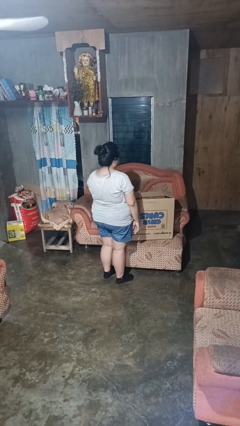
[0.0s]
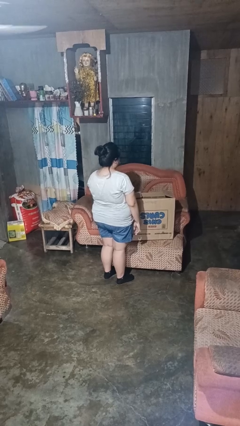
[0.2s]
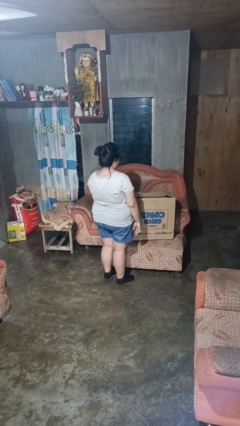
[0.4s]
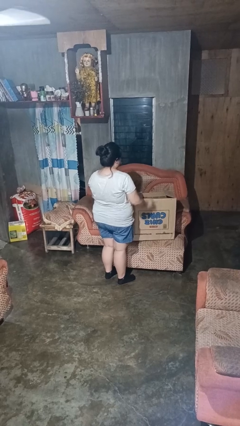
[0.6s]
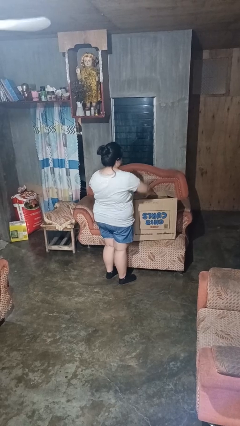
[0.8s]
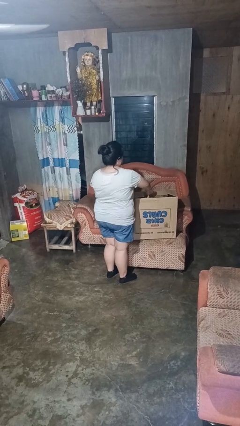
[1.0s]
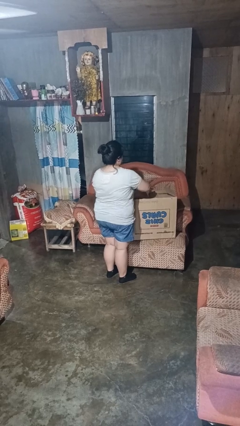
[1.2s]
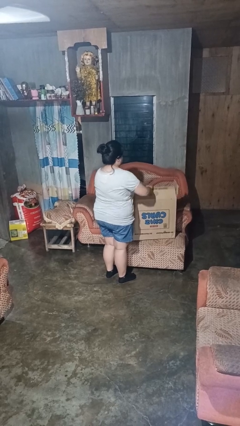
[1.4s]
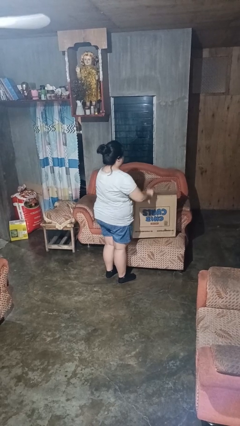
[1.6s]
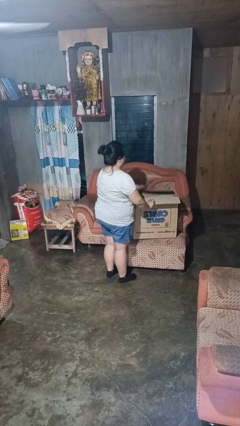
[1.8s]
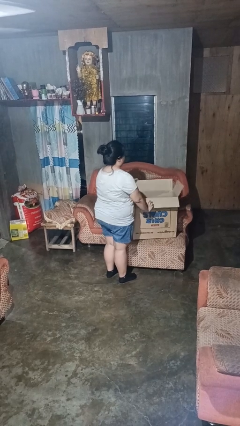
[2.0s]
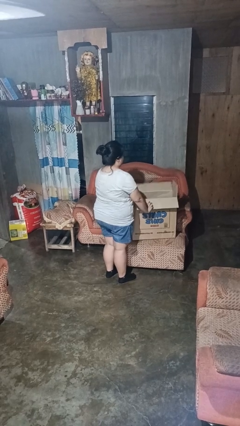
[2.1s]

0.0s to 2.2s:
person opens box

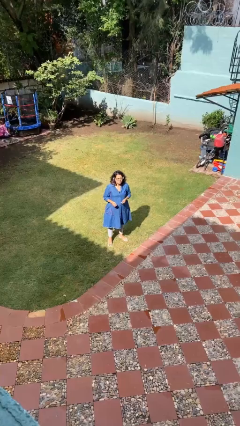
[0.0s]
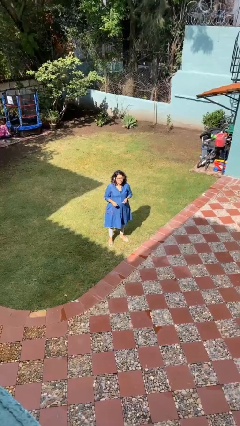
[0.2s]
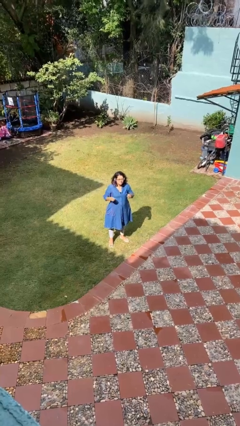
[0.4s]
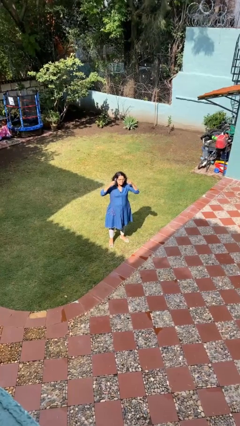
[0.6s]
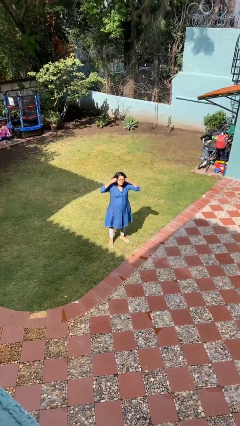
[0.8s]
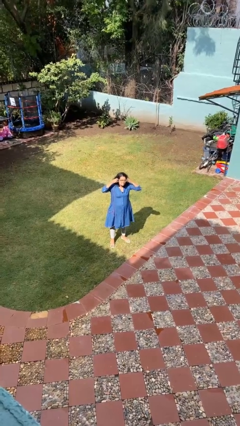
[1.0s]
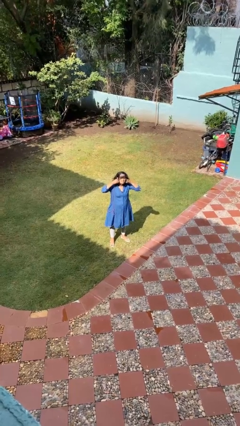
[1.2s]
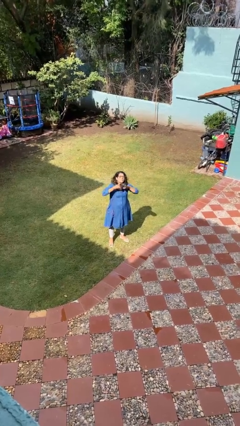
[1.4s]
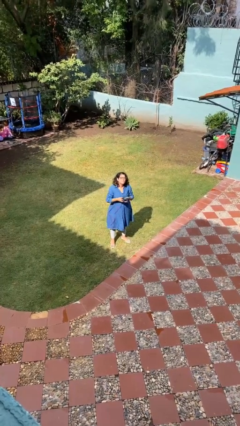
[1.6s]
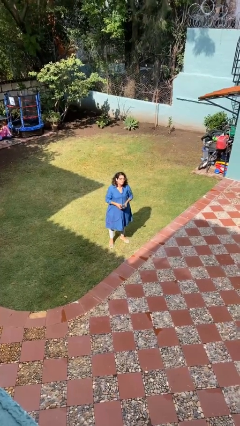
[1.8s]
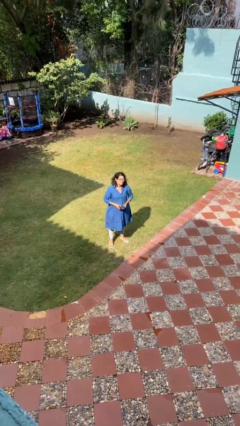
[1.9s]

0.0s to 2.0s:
person takes off headphones

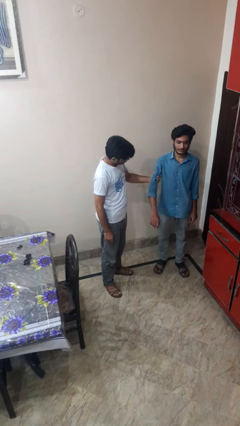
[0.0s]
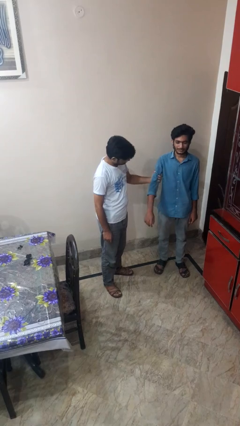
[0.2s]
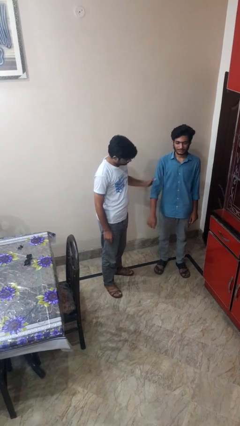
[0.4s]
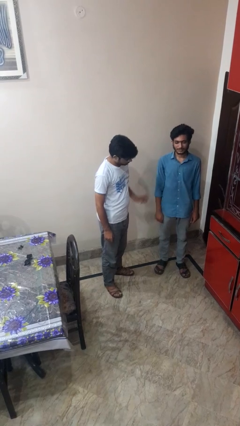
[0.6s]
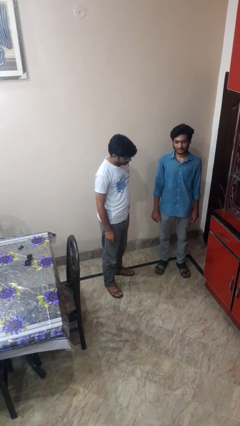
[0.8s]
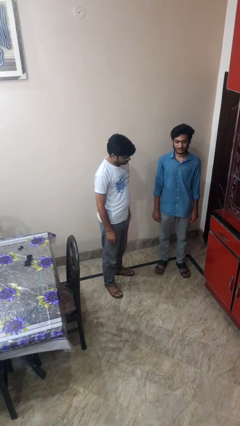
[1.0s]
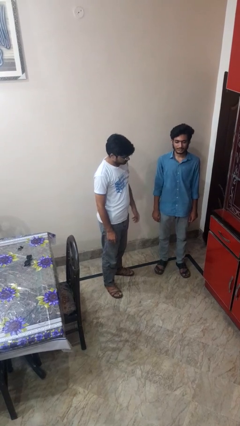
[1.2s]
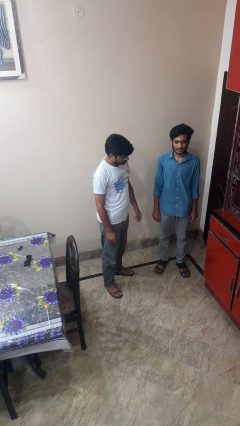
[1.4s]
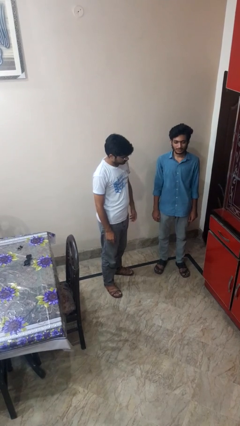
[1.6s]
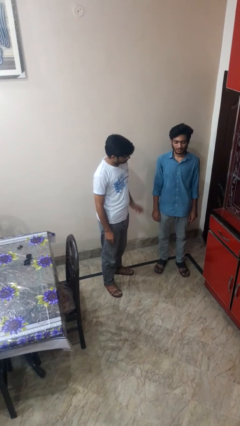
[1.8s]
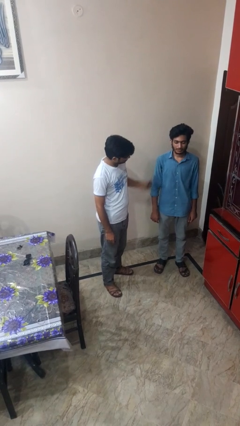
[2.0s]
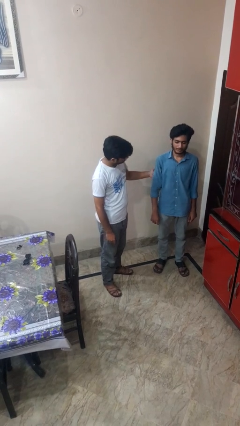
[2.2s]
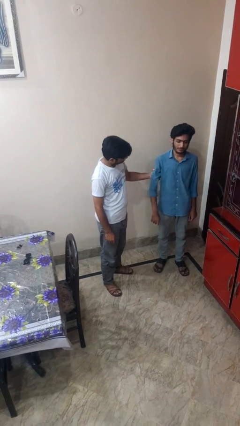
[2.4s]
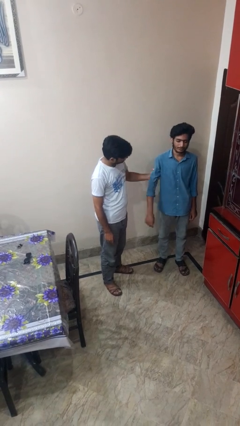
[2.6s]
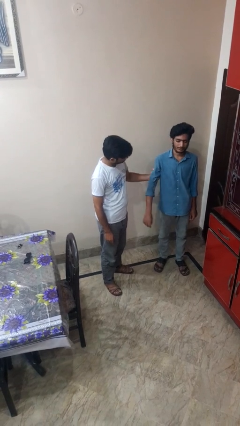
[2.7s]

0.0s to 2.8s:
person searches in backpack

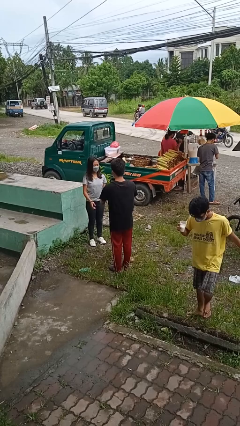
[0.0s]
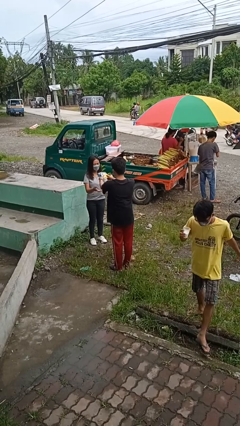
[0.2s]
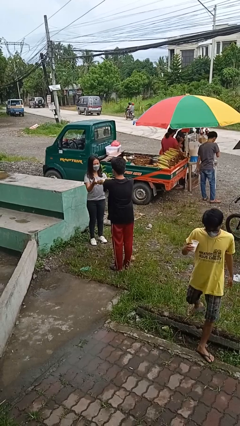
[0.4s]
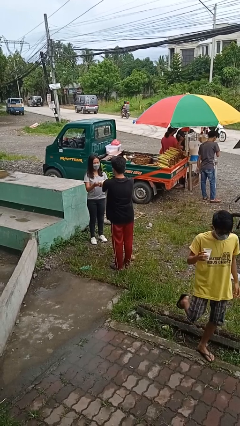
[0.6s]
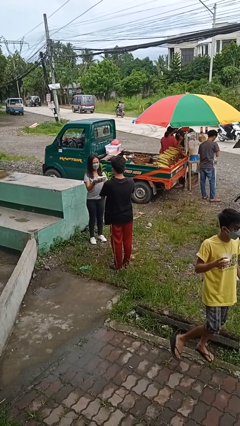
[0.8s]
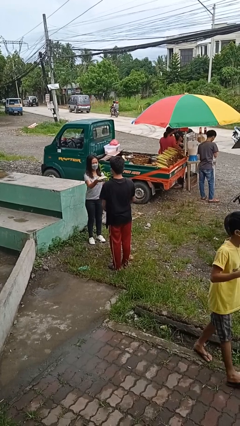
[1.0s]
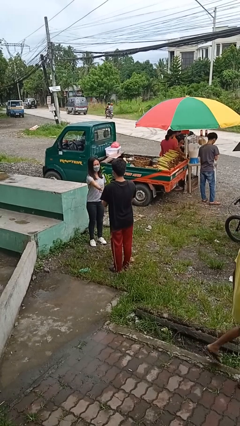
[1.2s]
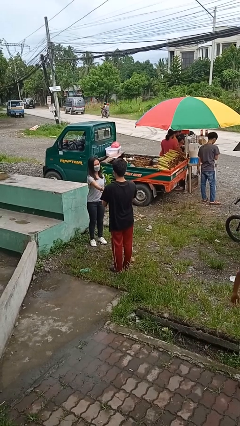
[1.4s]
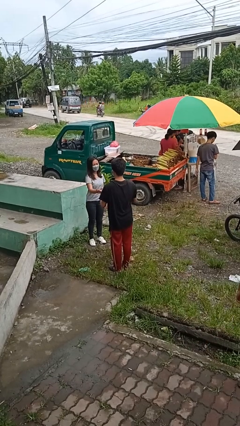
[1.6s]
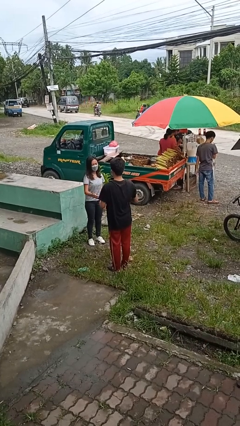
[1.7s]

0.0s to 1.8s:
person transfers object to person

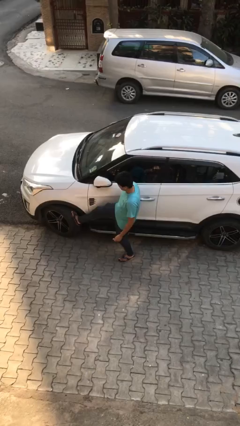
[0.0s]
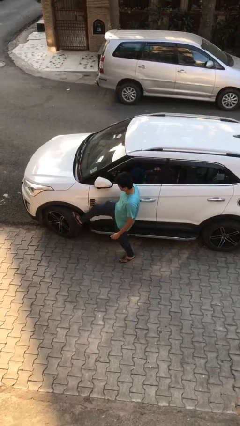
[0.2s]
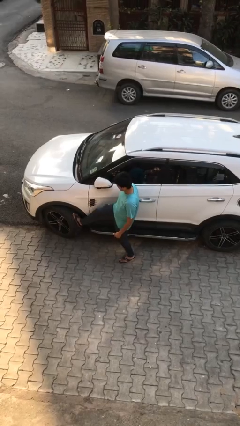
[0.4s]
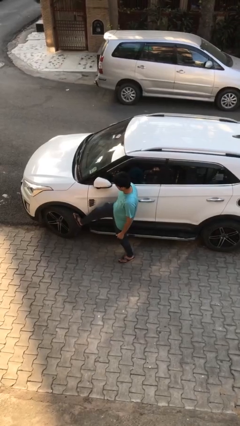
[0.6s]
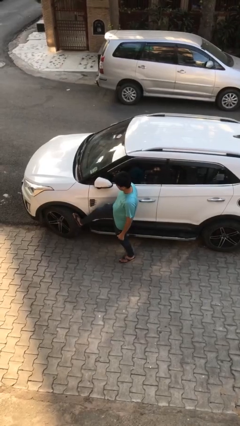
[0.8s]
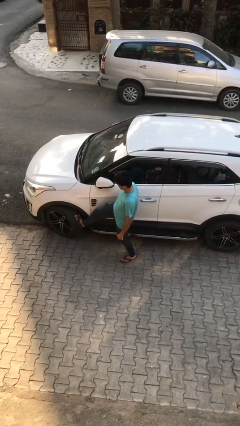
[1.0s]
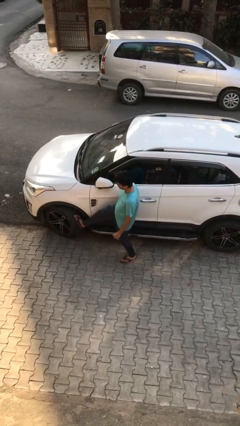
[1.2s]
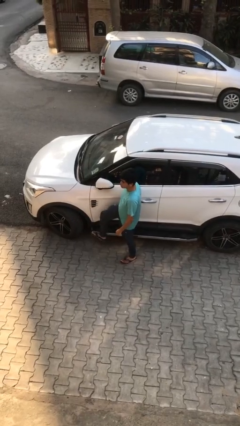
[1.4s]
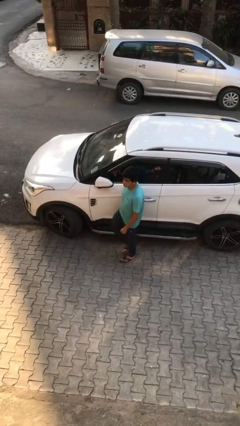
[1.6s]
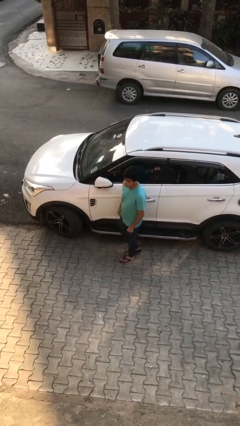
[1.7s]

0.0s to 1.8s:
person kicks car tires

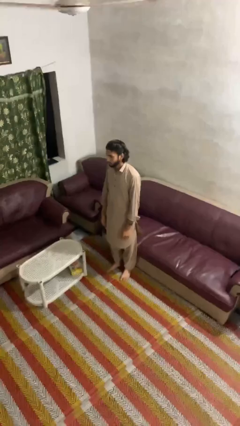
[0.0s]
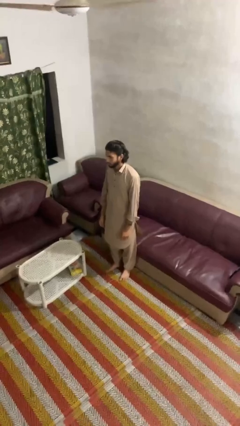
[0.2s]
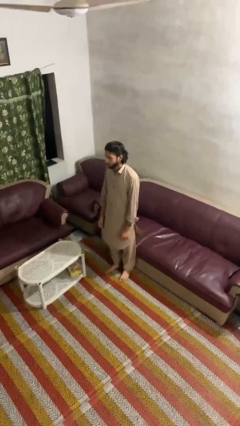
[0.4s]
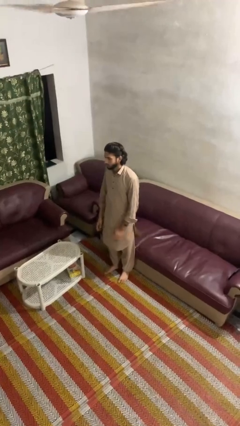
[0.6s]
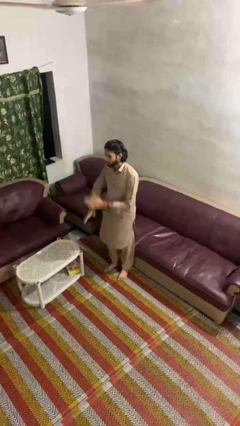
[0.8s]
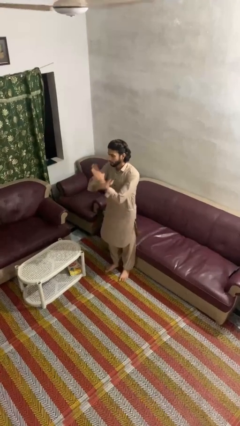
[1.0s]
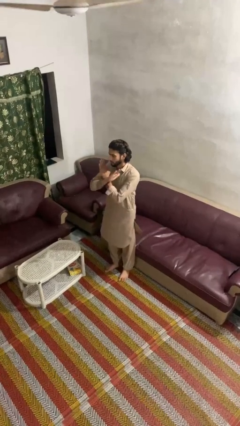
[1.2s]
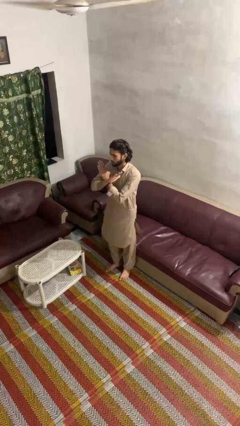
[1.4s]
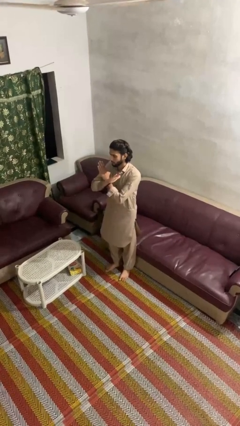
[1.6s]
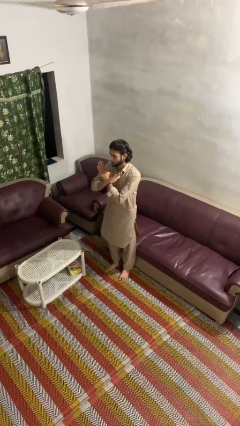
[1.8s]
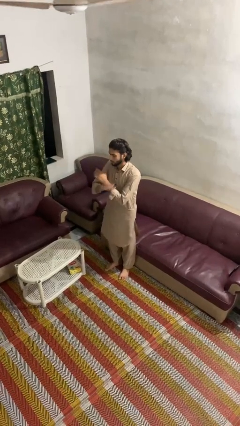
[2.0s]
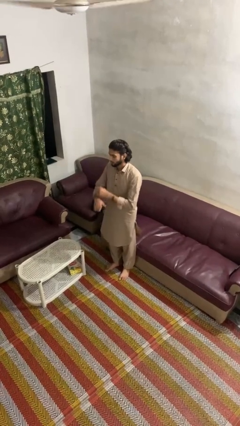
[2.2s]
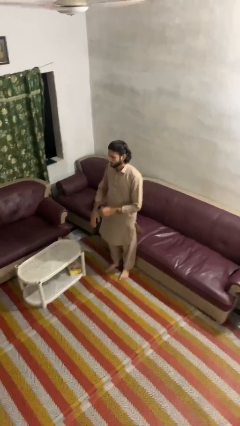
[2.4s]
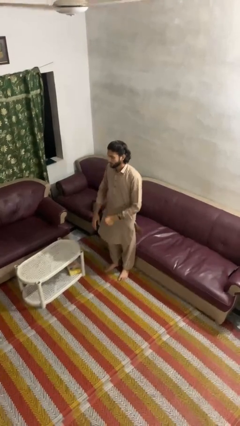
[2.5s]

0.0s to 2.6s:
person gestures arms x

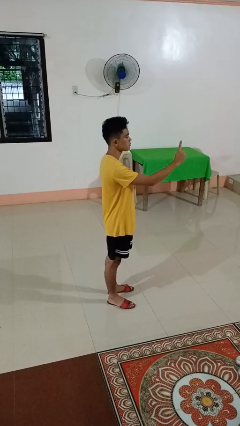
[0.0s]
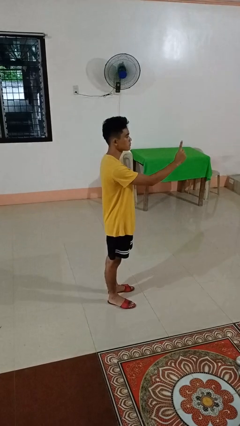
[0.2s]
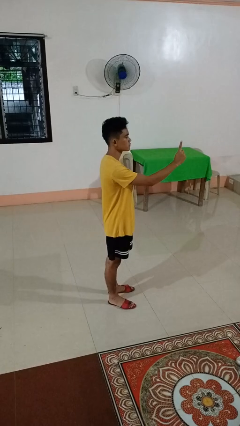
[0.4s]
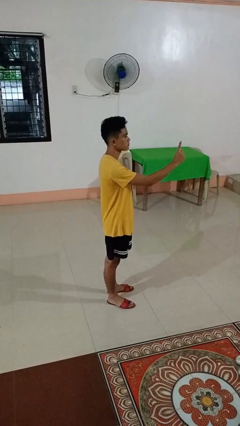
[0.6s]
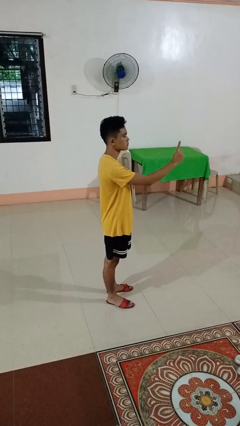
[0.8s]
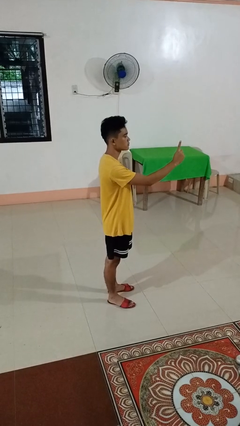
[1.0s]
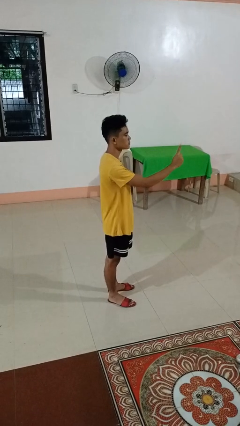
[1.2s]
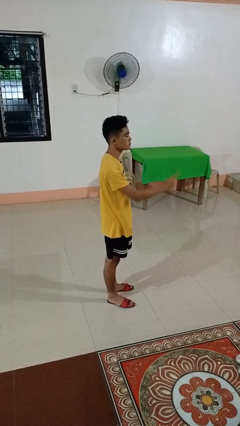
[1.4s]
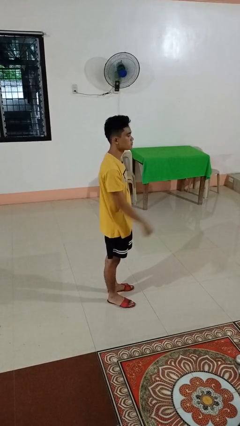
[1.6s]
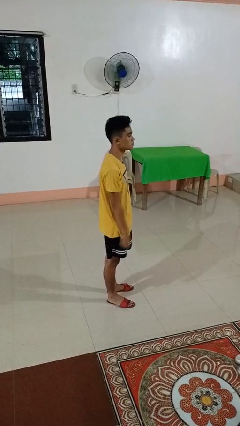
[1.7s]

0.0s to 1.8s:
person gestures number one

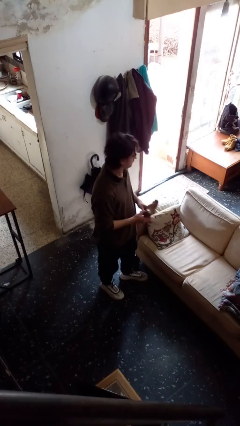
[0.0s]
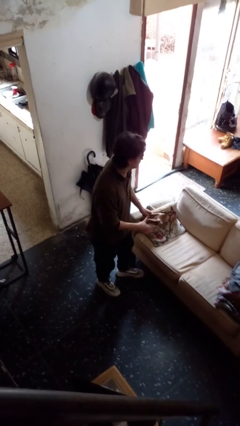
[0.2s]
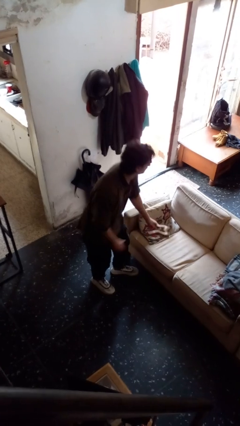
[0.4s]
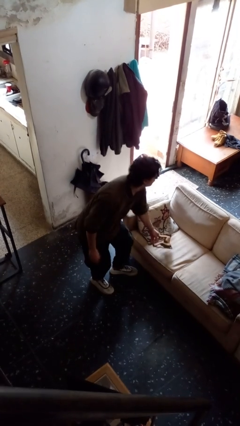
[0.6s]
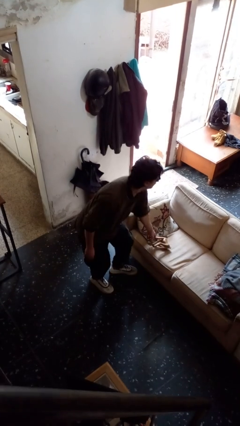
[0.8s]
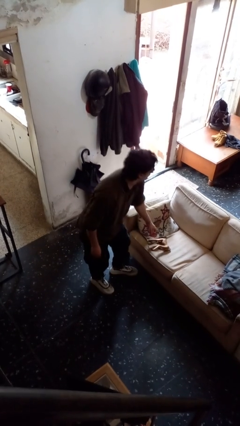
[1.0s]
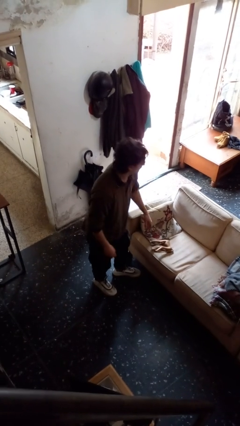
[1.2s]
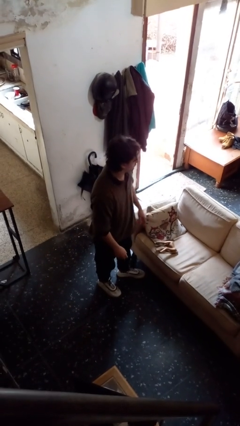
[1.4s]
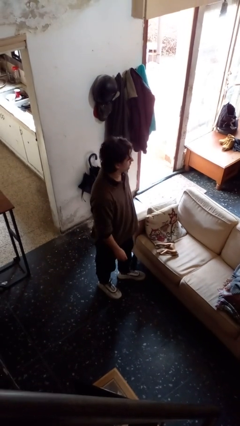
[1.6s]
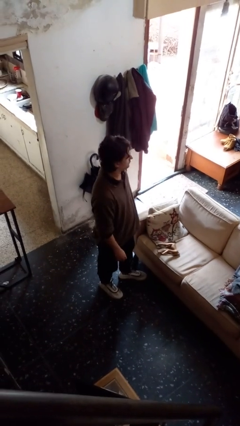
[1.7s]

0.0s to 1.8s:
person puts down object on couch

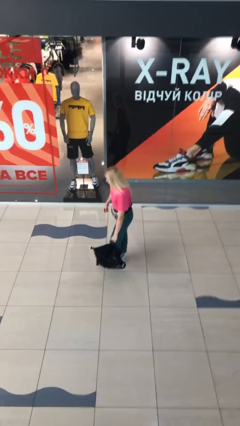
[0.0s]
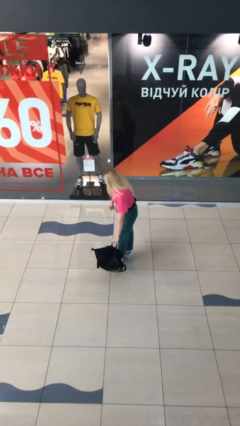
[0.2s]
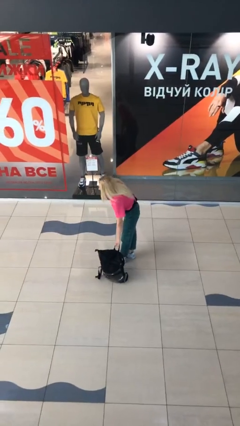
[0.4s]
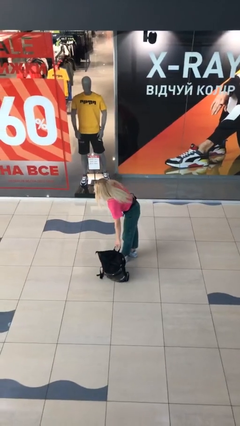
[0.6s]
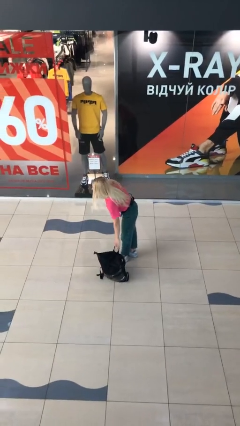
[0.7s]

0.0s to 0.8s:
person puts down object on floor
